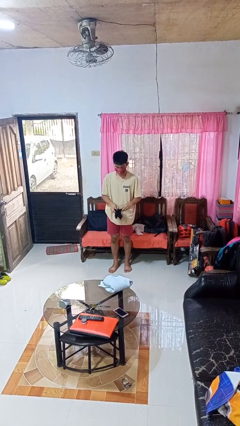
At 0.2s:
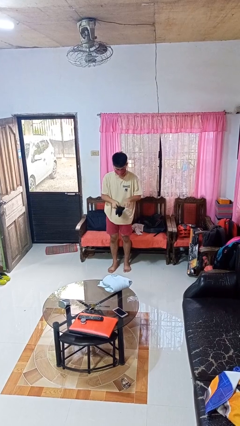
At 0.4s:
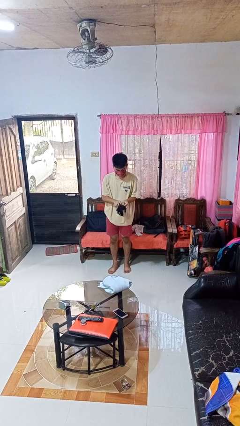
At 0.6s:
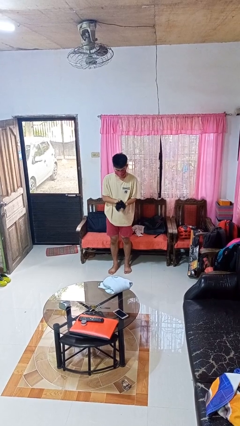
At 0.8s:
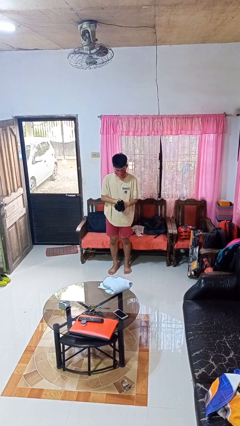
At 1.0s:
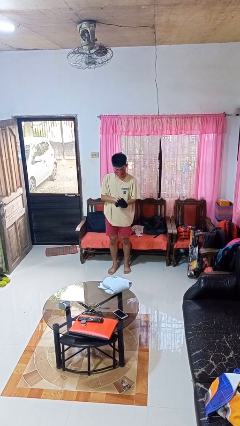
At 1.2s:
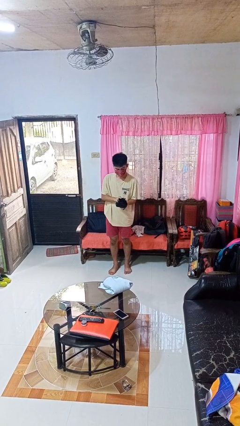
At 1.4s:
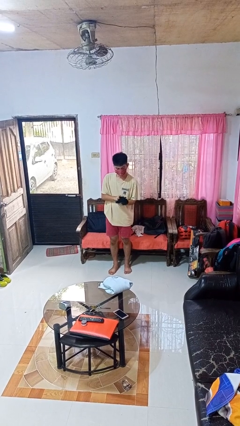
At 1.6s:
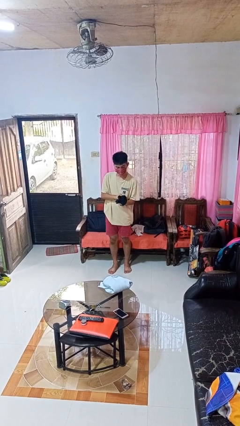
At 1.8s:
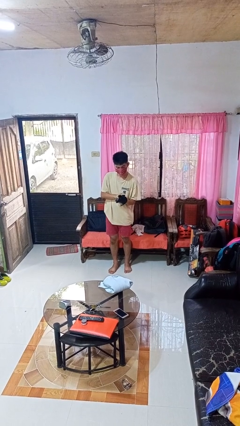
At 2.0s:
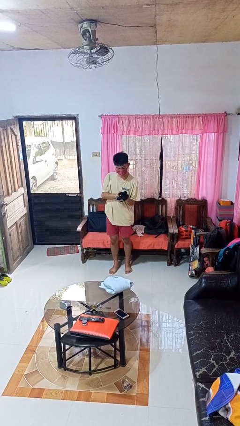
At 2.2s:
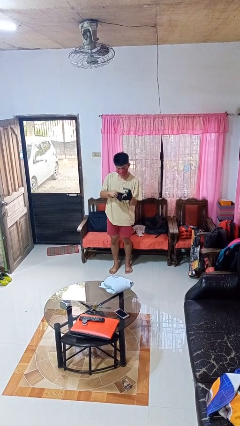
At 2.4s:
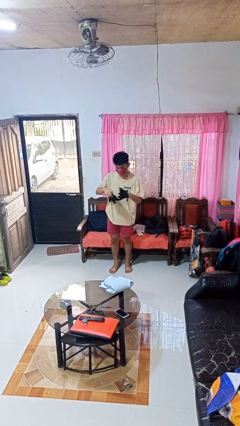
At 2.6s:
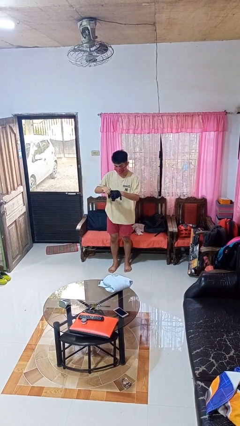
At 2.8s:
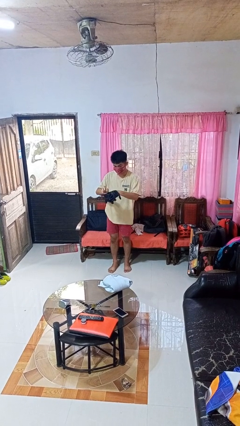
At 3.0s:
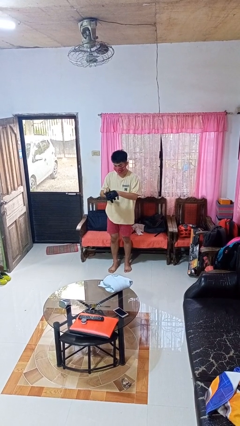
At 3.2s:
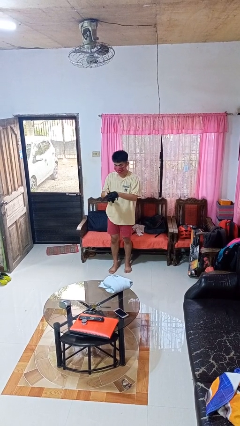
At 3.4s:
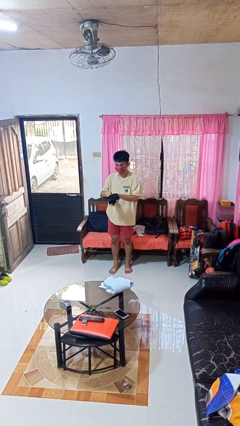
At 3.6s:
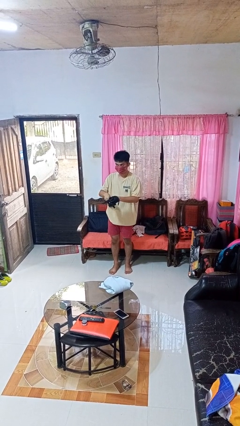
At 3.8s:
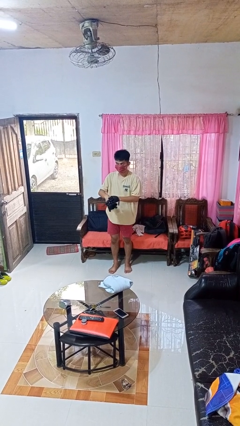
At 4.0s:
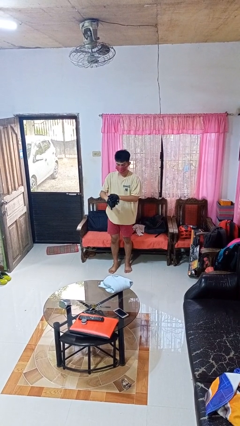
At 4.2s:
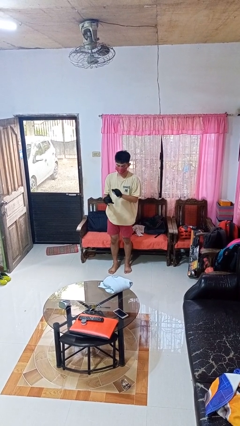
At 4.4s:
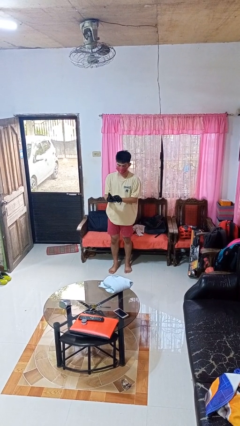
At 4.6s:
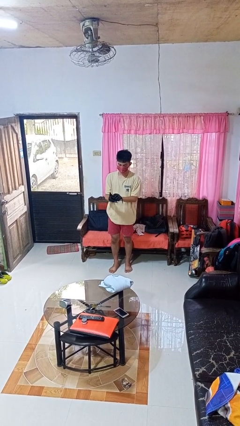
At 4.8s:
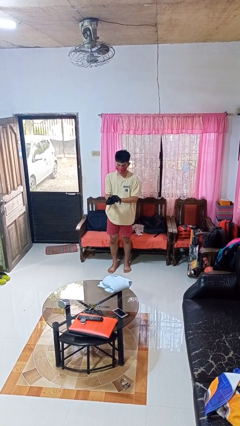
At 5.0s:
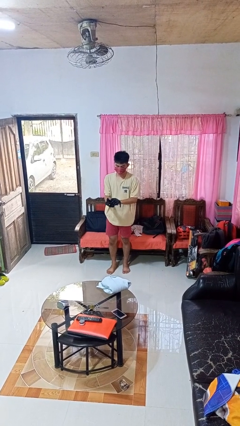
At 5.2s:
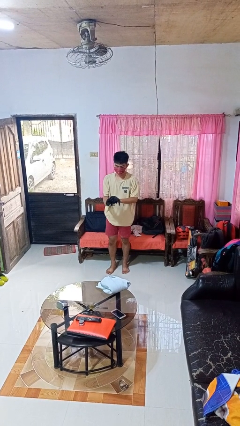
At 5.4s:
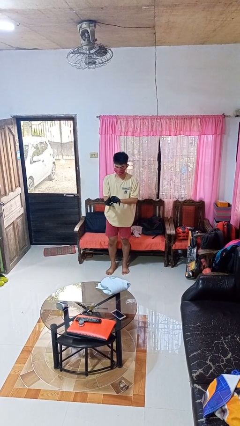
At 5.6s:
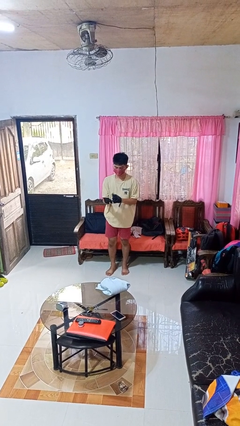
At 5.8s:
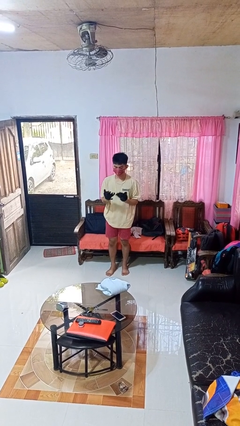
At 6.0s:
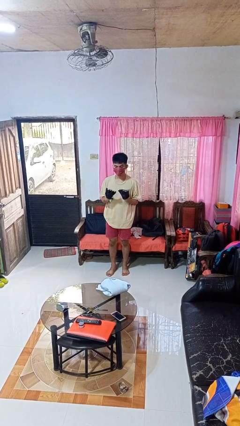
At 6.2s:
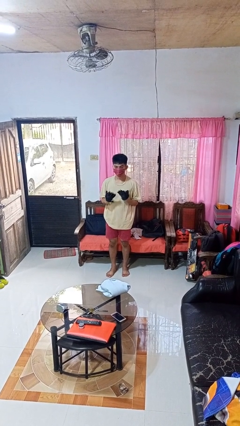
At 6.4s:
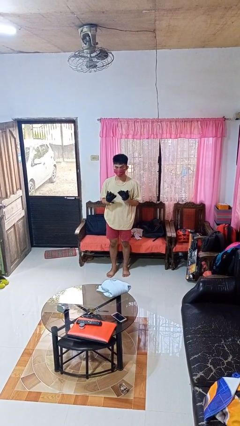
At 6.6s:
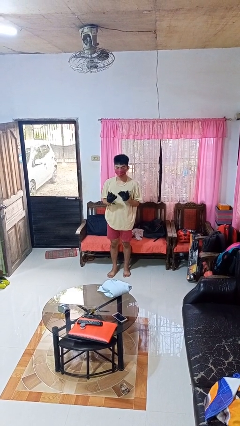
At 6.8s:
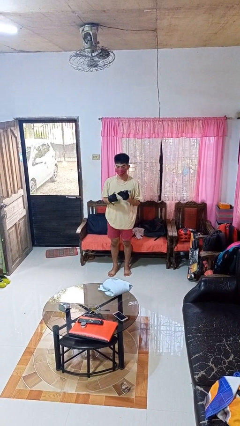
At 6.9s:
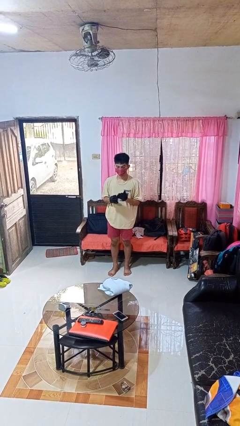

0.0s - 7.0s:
person puts on gloves

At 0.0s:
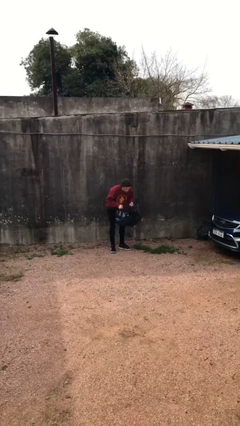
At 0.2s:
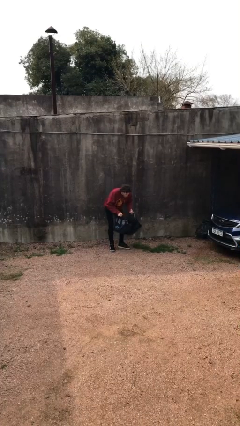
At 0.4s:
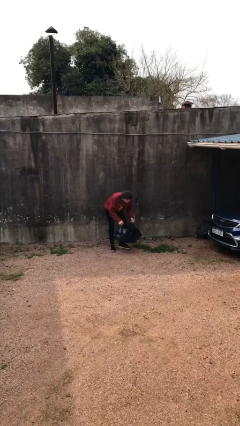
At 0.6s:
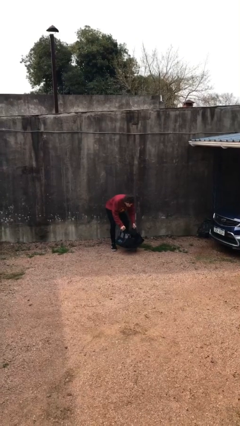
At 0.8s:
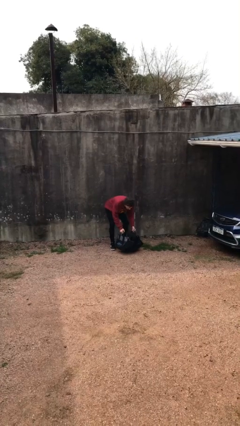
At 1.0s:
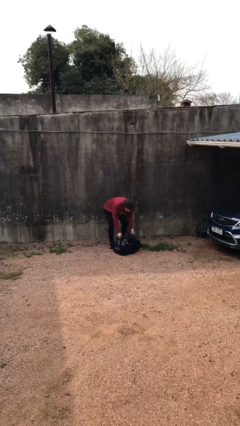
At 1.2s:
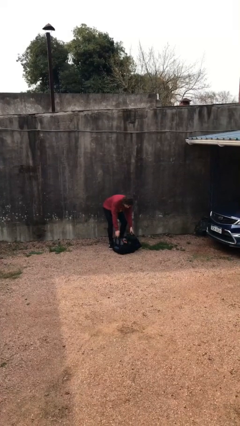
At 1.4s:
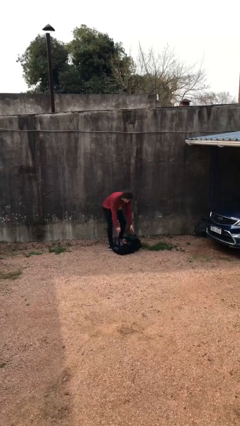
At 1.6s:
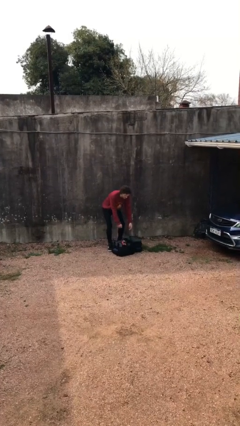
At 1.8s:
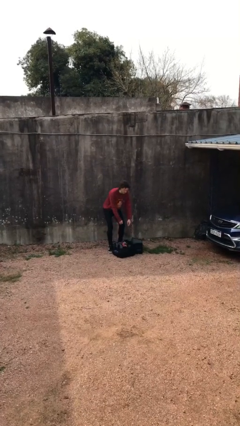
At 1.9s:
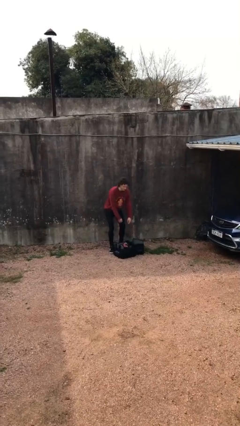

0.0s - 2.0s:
person puts down object on floor

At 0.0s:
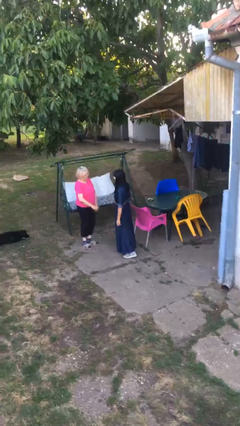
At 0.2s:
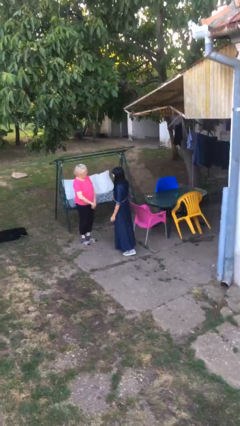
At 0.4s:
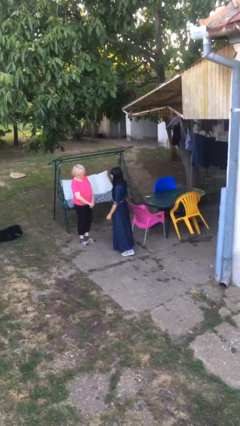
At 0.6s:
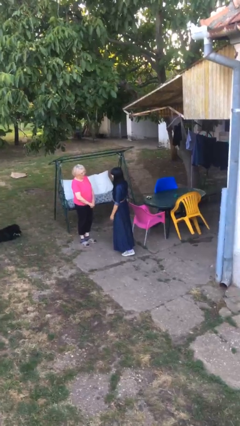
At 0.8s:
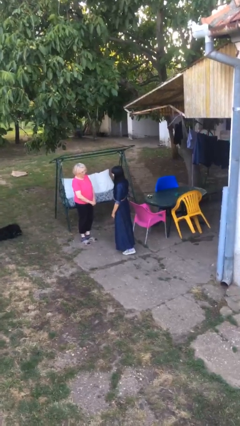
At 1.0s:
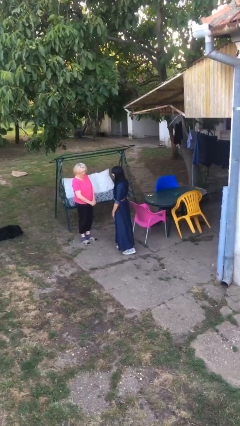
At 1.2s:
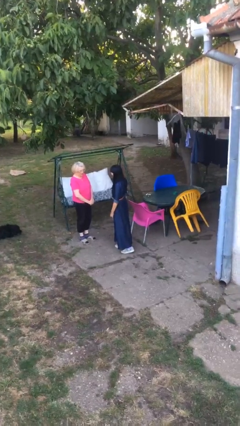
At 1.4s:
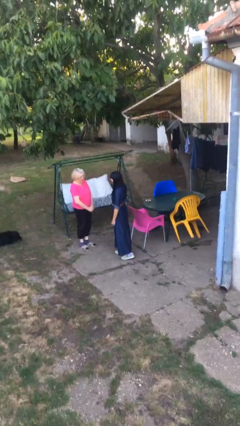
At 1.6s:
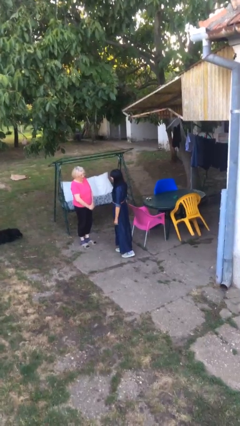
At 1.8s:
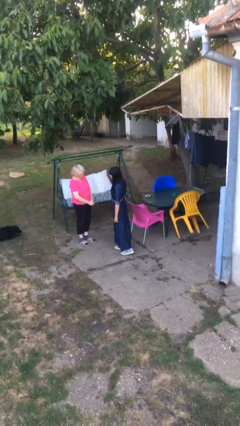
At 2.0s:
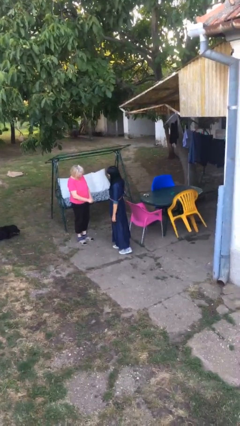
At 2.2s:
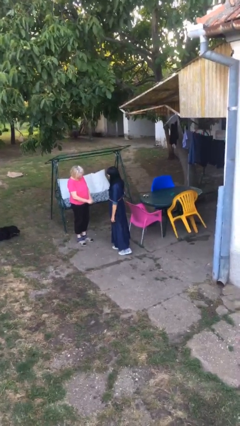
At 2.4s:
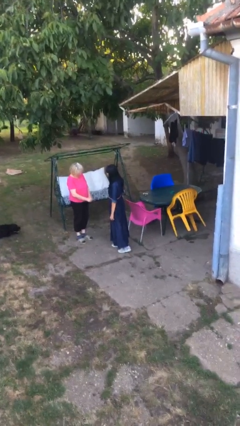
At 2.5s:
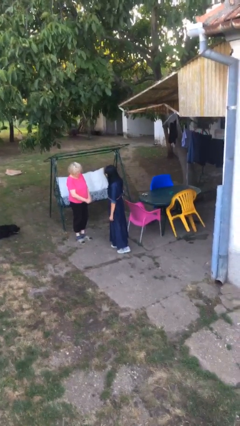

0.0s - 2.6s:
person talks to person

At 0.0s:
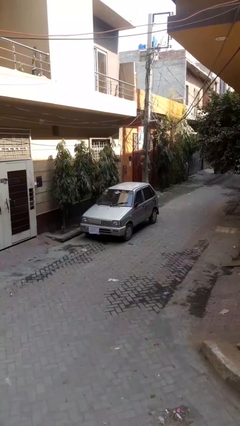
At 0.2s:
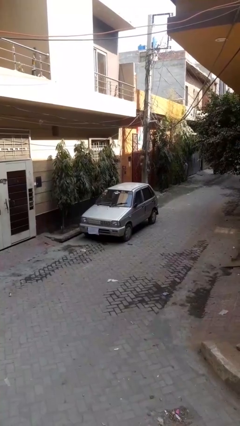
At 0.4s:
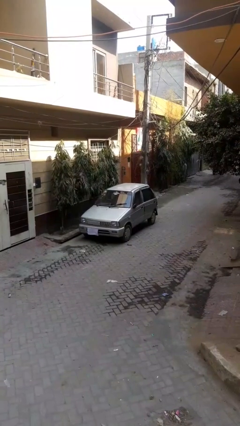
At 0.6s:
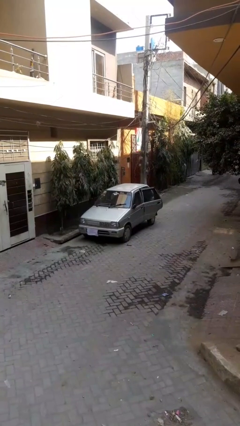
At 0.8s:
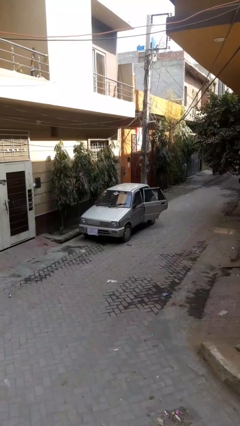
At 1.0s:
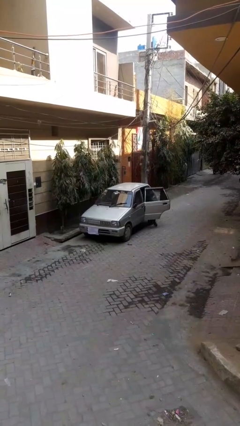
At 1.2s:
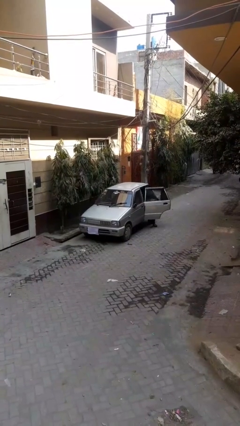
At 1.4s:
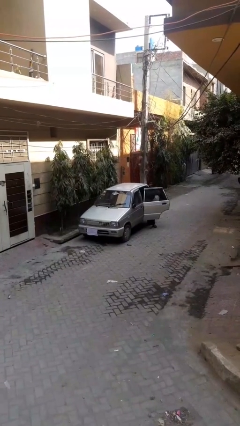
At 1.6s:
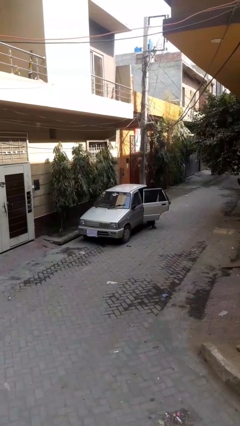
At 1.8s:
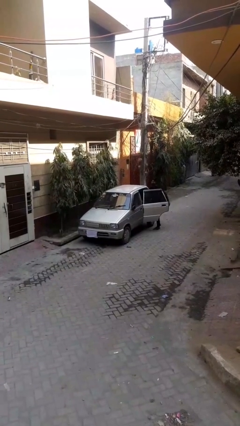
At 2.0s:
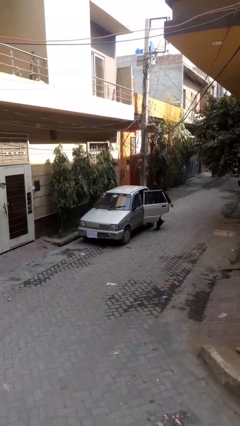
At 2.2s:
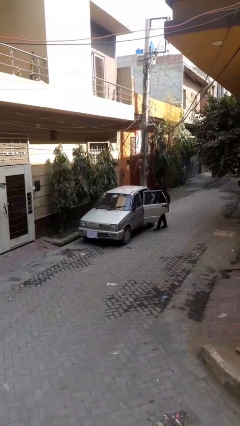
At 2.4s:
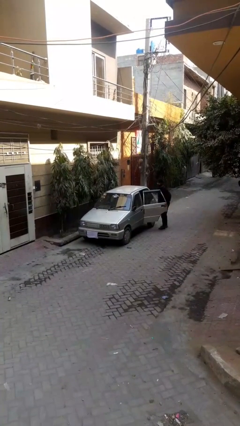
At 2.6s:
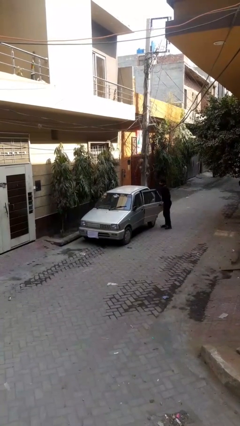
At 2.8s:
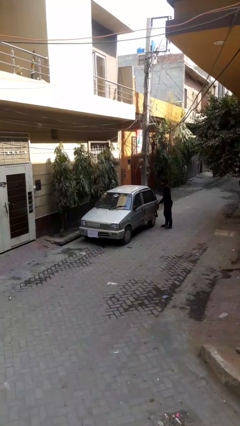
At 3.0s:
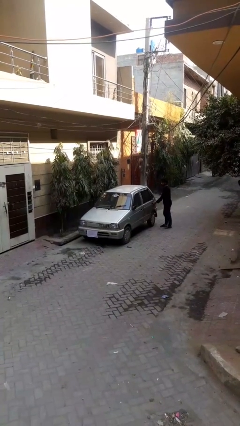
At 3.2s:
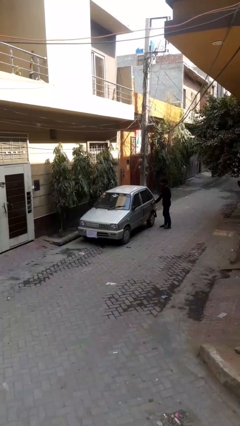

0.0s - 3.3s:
car drops off person

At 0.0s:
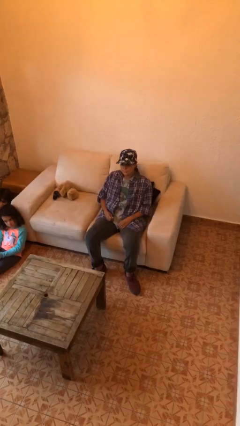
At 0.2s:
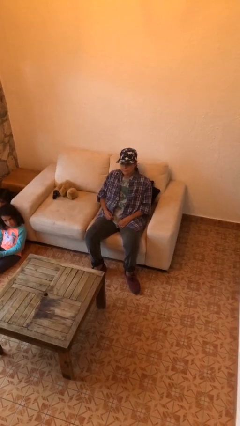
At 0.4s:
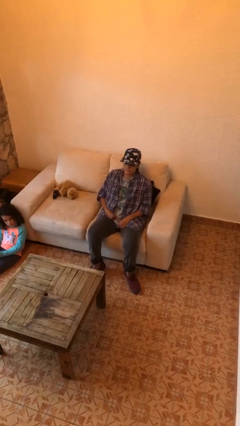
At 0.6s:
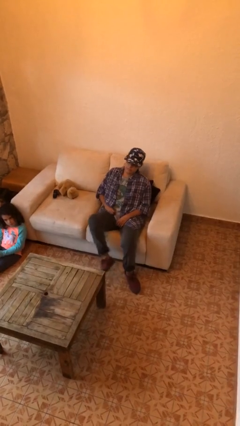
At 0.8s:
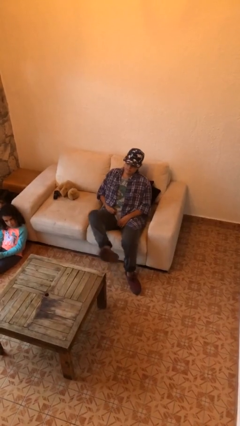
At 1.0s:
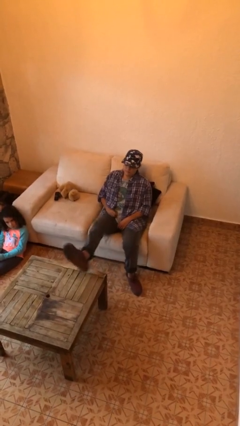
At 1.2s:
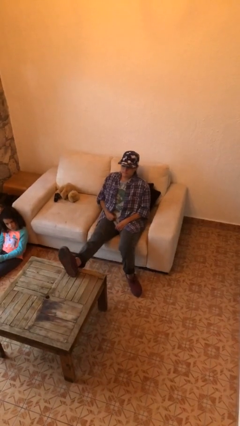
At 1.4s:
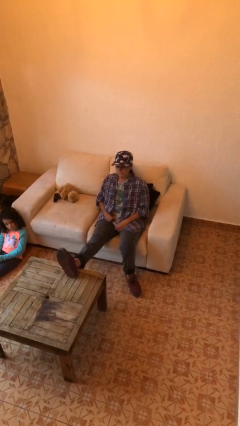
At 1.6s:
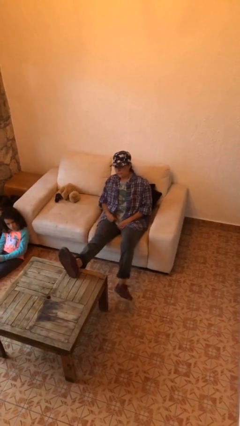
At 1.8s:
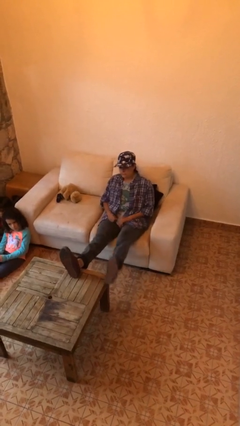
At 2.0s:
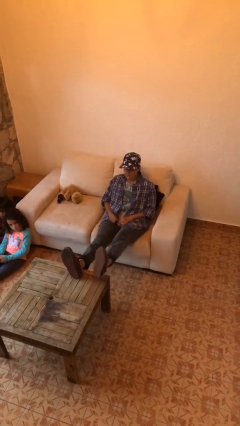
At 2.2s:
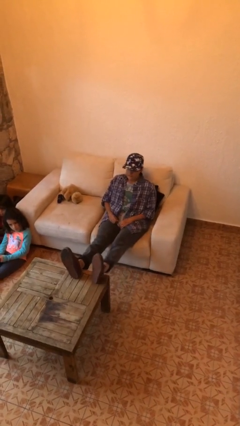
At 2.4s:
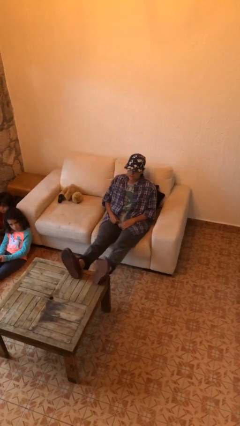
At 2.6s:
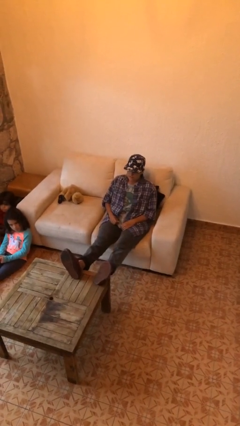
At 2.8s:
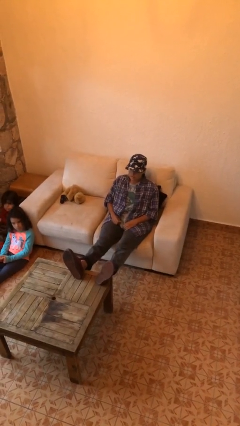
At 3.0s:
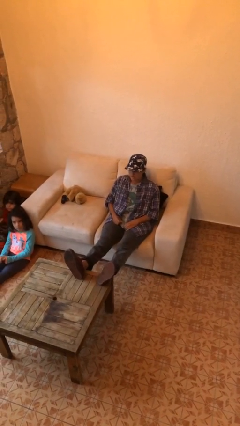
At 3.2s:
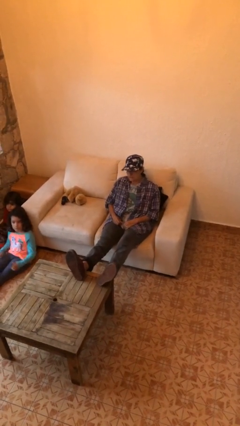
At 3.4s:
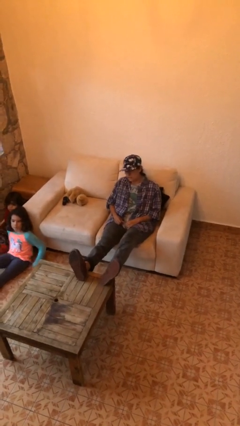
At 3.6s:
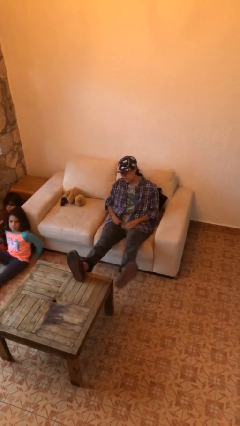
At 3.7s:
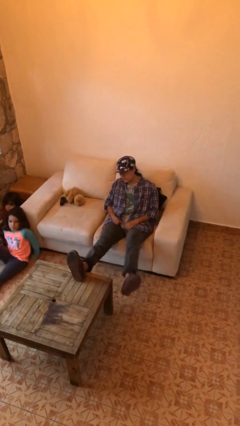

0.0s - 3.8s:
person puts feet up
